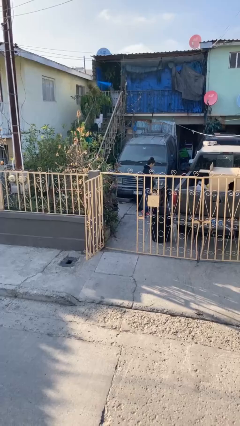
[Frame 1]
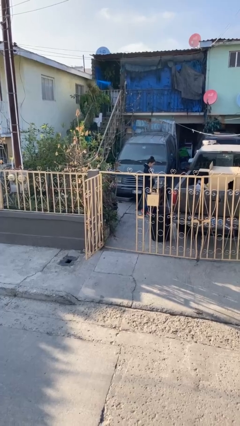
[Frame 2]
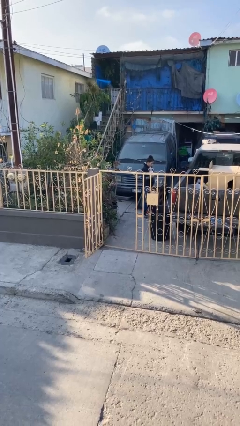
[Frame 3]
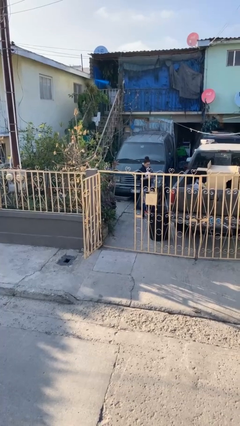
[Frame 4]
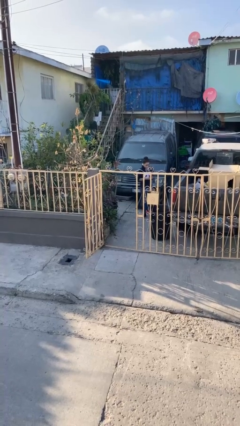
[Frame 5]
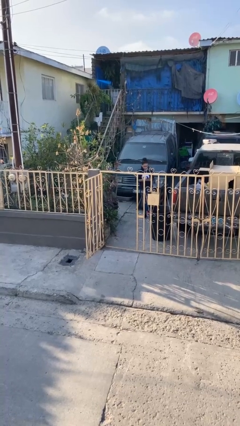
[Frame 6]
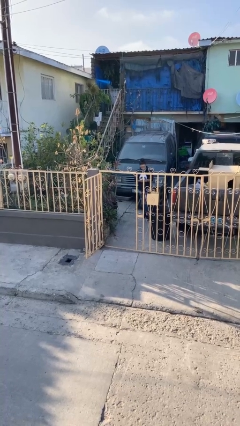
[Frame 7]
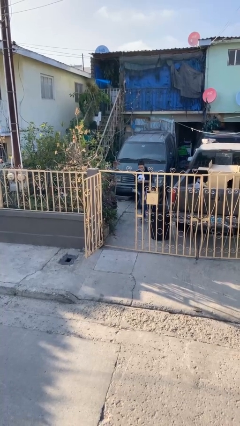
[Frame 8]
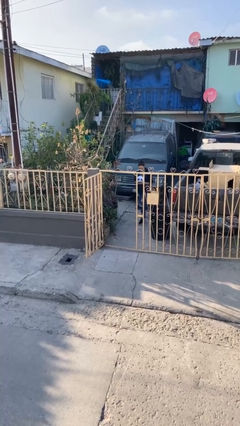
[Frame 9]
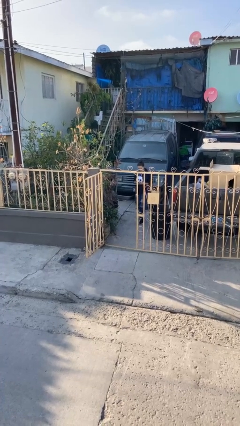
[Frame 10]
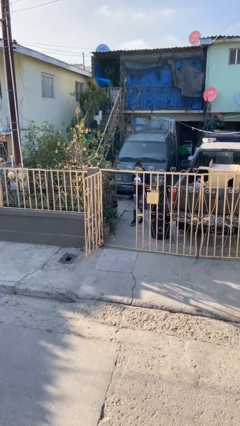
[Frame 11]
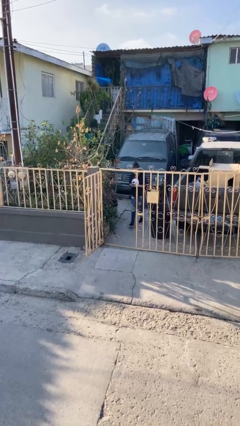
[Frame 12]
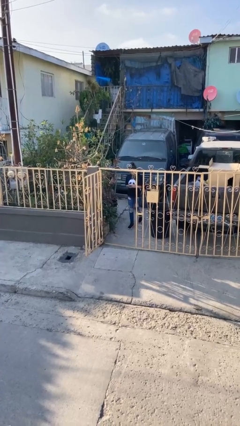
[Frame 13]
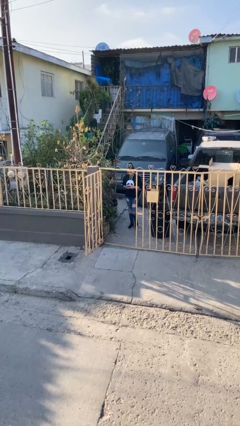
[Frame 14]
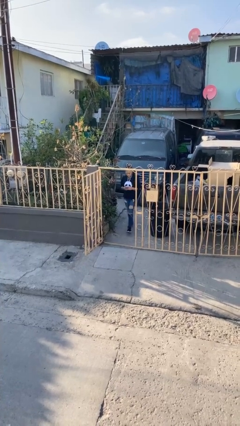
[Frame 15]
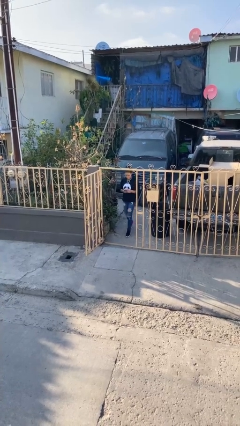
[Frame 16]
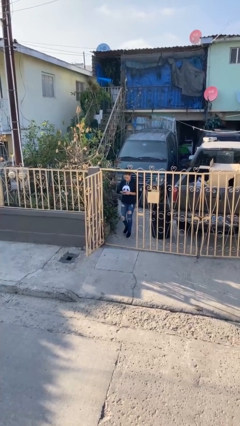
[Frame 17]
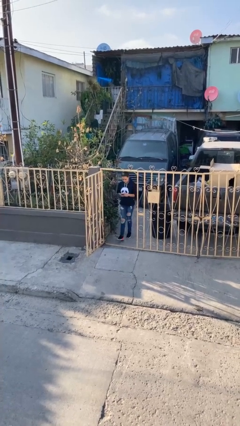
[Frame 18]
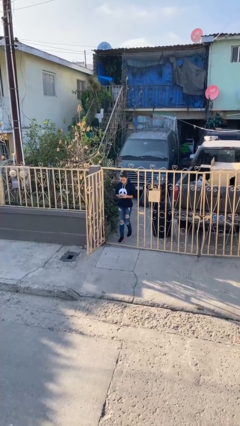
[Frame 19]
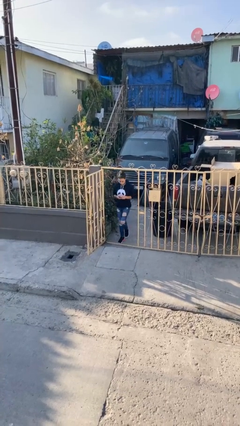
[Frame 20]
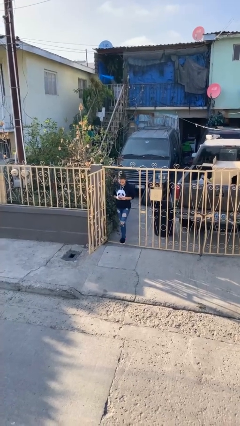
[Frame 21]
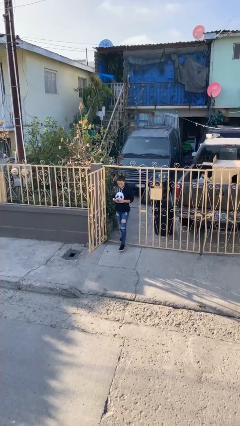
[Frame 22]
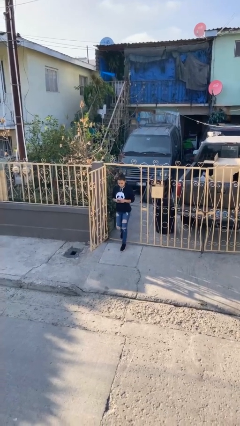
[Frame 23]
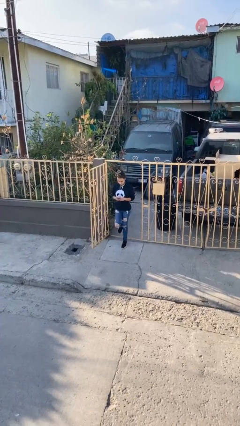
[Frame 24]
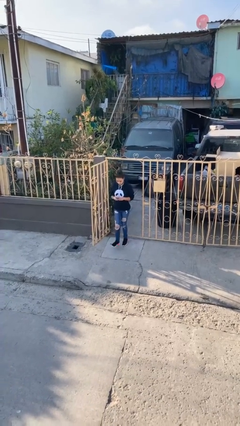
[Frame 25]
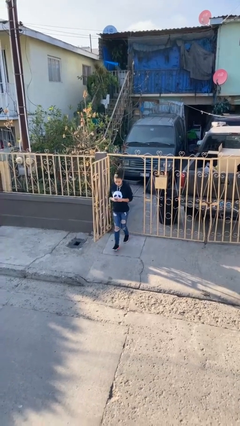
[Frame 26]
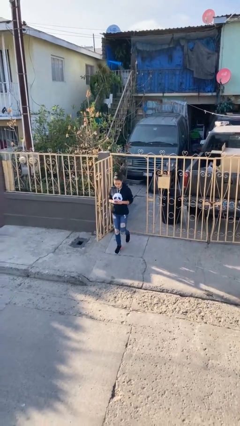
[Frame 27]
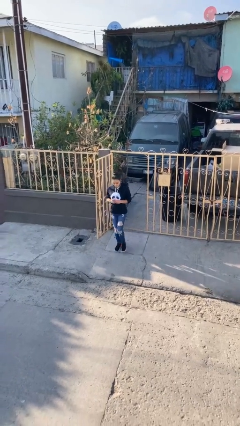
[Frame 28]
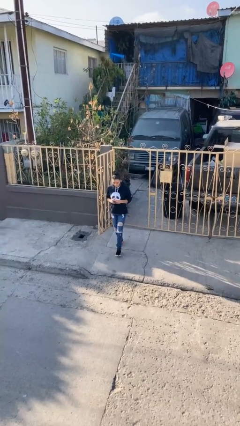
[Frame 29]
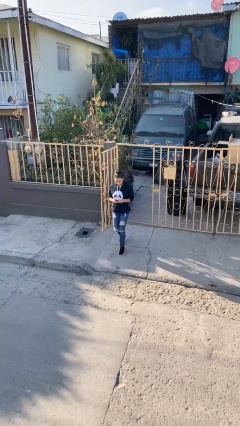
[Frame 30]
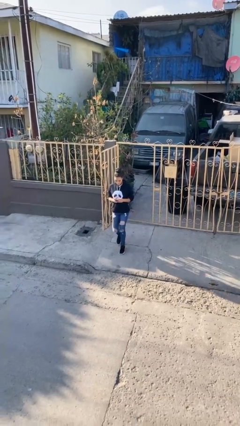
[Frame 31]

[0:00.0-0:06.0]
person enters scene through structure

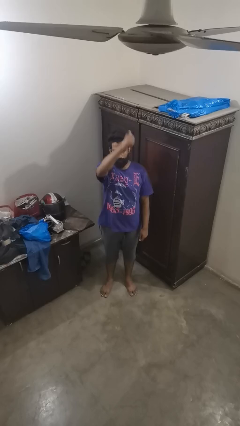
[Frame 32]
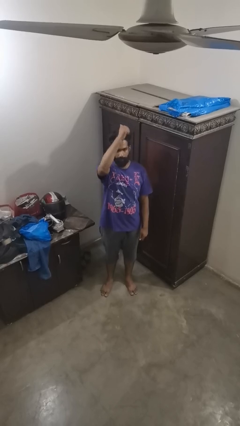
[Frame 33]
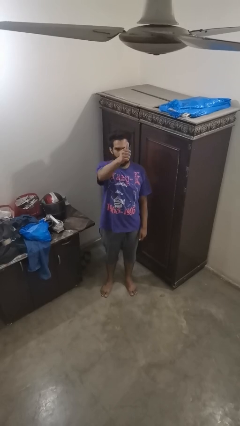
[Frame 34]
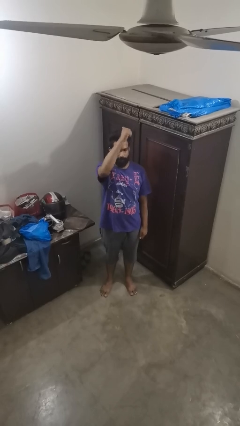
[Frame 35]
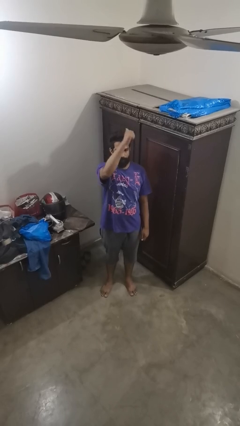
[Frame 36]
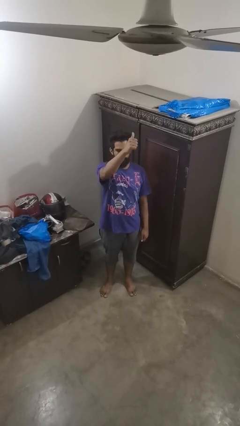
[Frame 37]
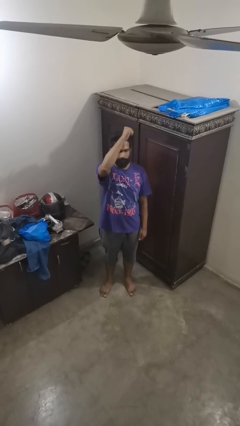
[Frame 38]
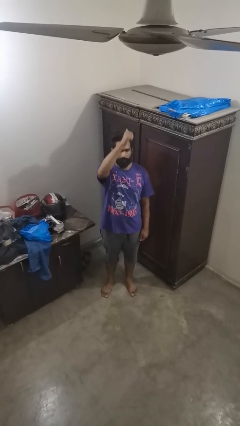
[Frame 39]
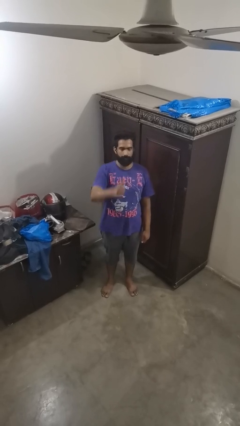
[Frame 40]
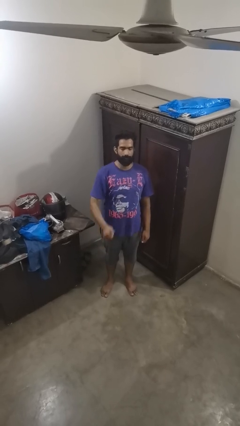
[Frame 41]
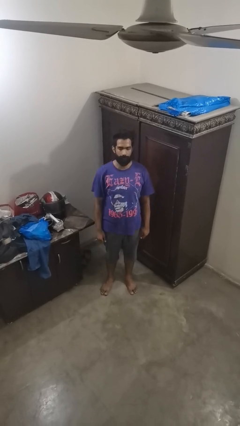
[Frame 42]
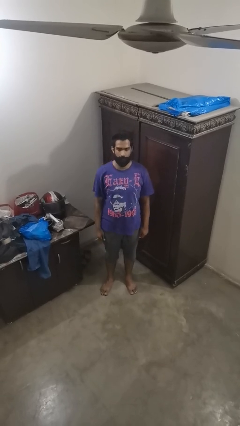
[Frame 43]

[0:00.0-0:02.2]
person gestures behind me

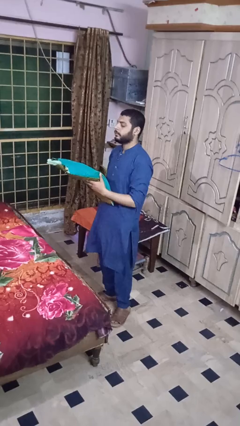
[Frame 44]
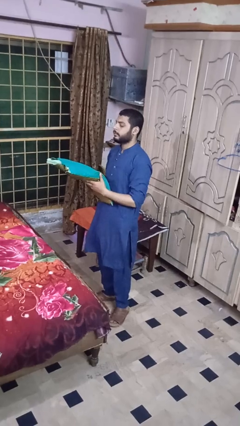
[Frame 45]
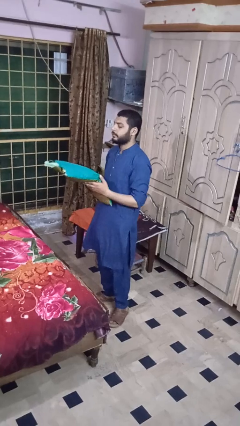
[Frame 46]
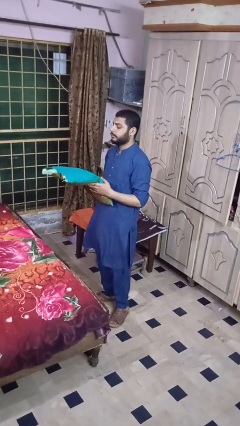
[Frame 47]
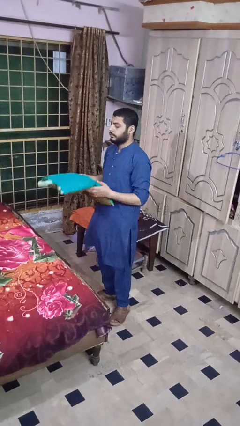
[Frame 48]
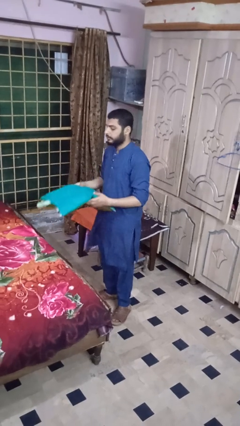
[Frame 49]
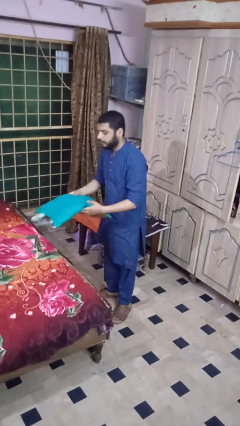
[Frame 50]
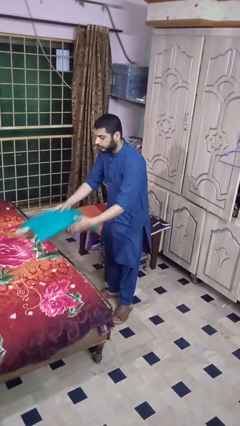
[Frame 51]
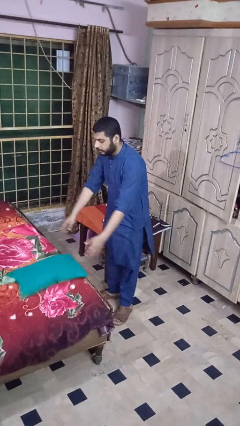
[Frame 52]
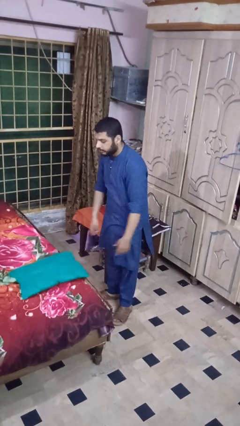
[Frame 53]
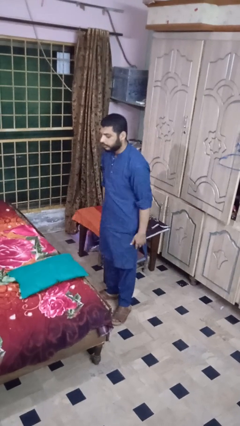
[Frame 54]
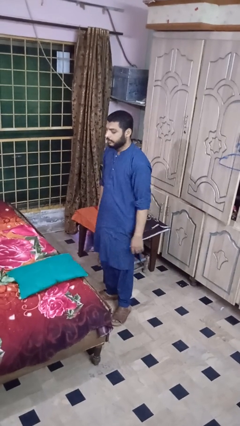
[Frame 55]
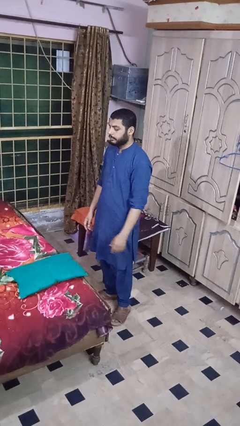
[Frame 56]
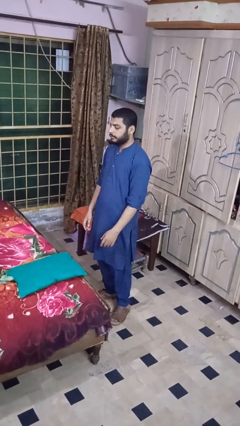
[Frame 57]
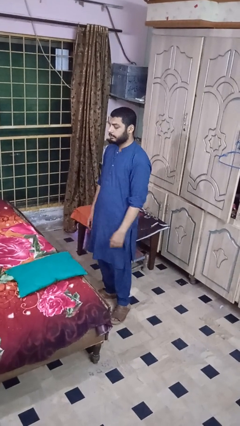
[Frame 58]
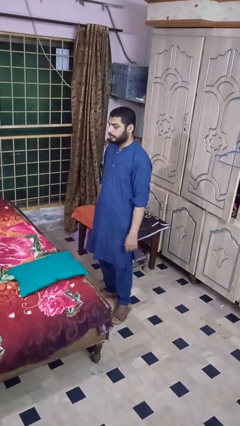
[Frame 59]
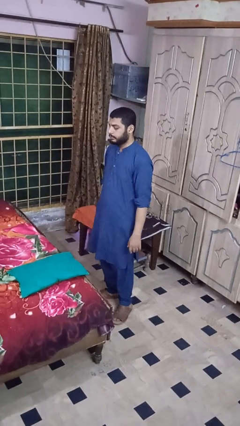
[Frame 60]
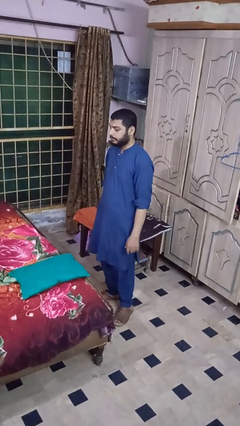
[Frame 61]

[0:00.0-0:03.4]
person puts down object on bed

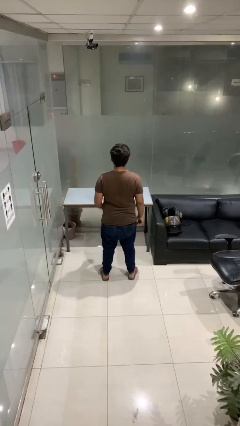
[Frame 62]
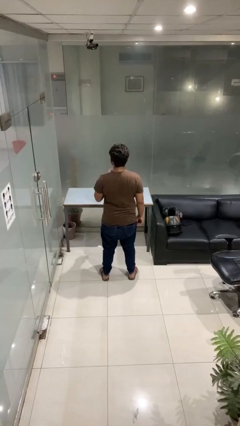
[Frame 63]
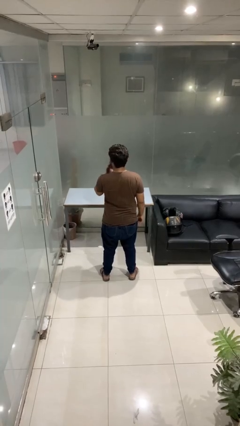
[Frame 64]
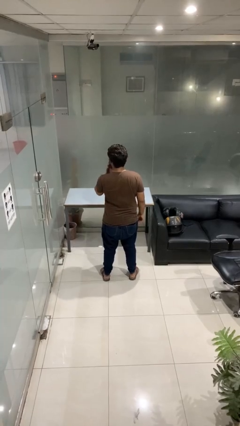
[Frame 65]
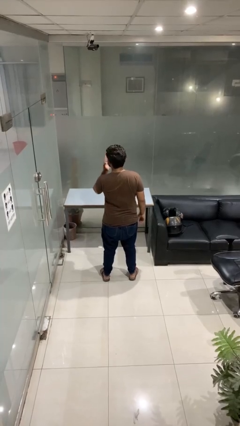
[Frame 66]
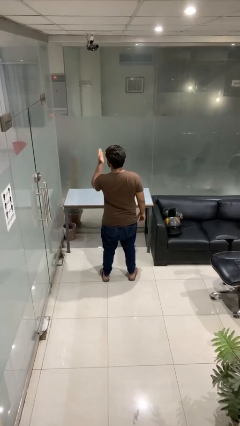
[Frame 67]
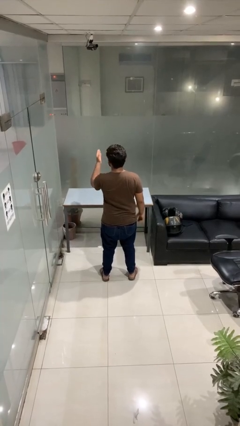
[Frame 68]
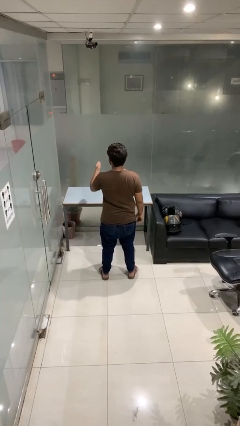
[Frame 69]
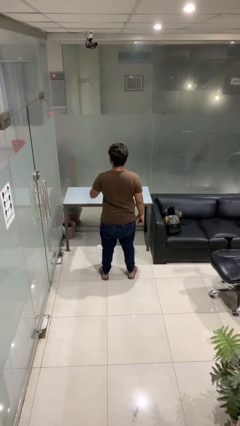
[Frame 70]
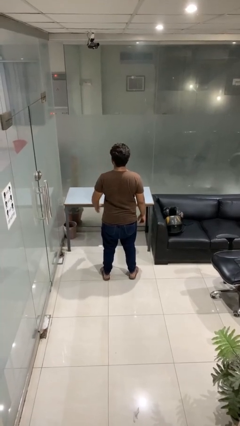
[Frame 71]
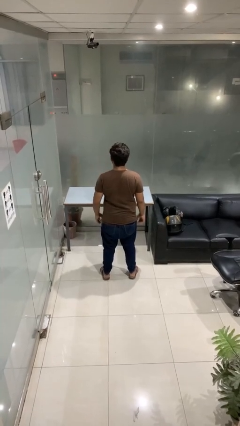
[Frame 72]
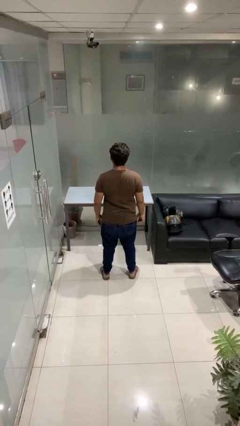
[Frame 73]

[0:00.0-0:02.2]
person gestures blow kiss

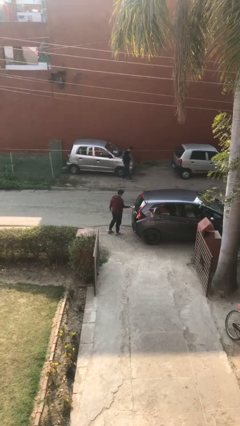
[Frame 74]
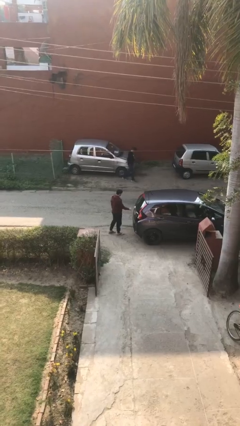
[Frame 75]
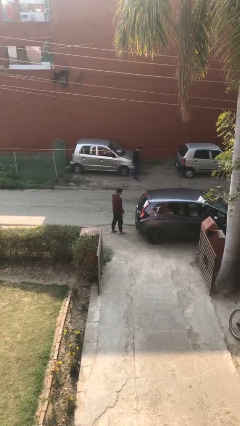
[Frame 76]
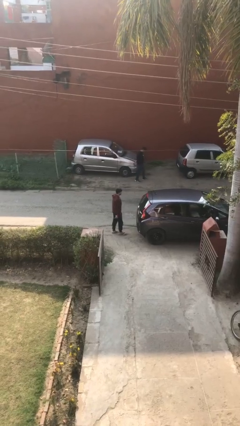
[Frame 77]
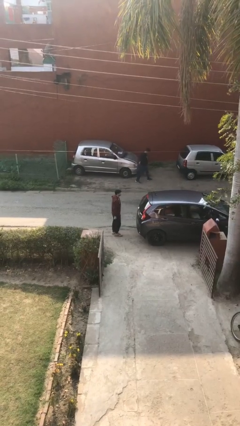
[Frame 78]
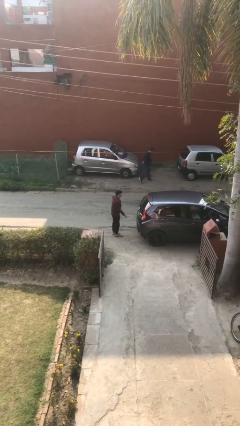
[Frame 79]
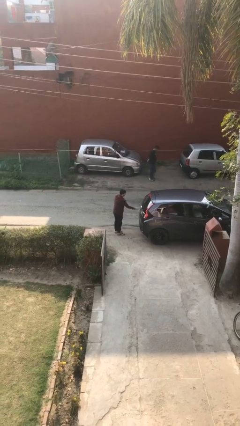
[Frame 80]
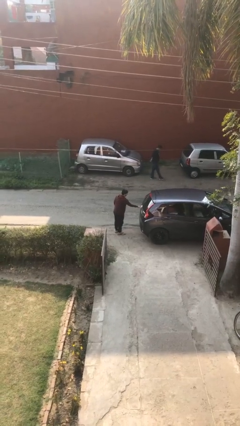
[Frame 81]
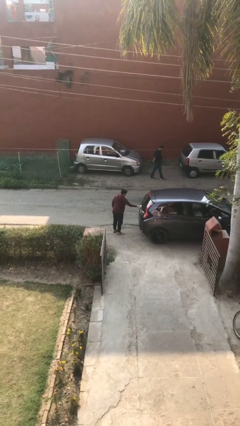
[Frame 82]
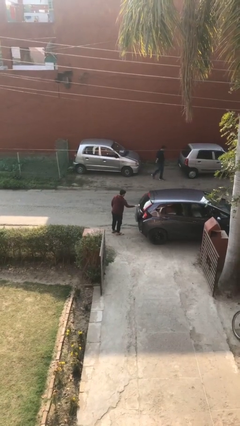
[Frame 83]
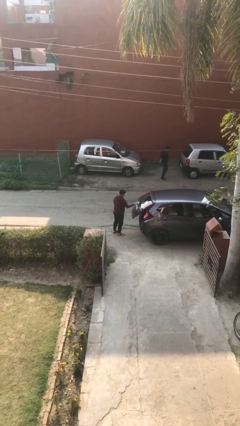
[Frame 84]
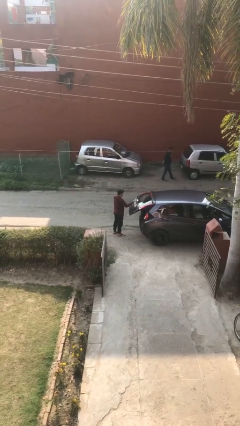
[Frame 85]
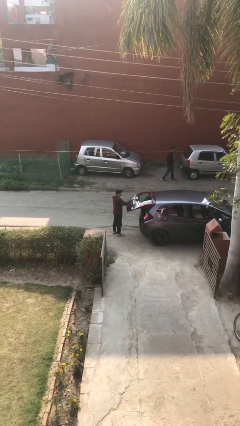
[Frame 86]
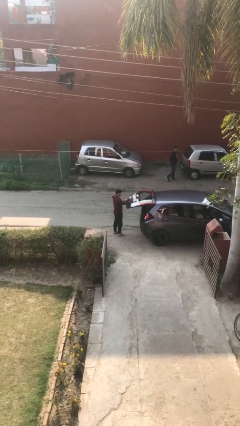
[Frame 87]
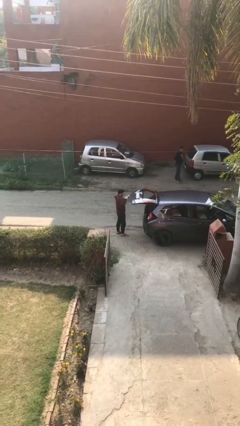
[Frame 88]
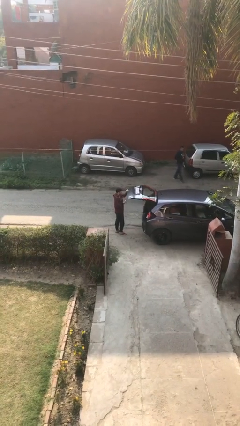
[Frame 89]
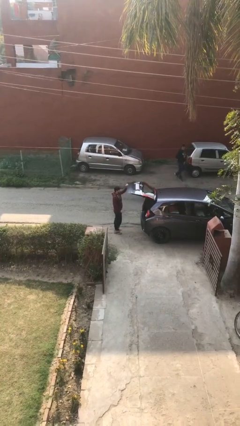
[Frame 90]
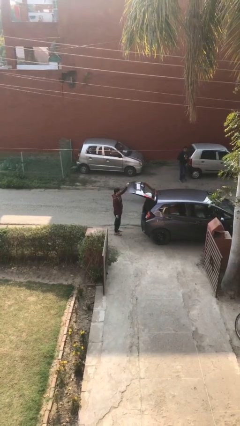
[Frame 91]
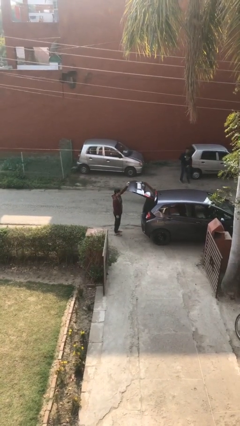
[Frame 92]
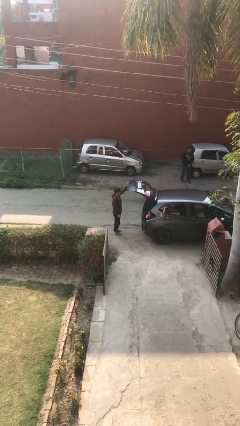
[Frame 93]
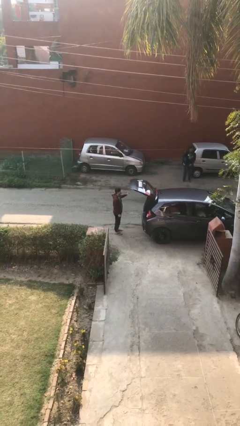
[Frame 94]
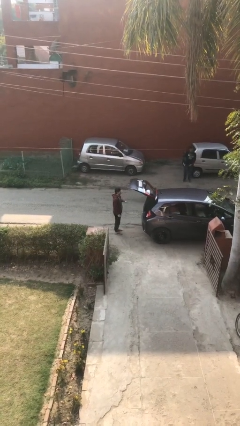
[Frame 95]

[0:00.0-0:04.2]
person opens car trunk
